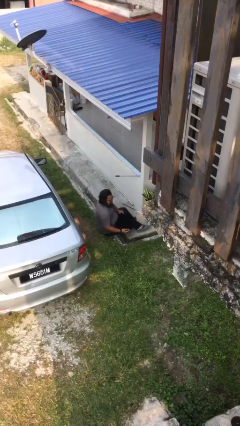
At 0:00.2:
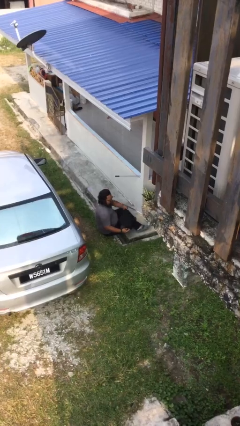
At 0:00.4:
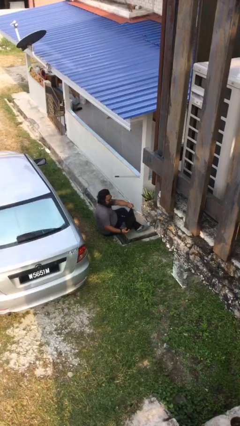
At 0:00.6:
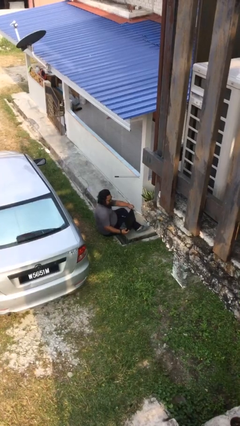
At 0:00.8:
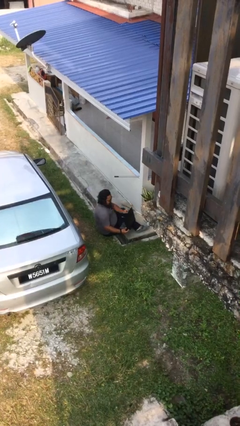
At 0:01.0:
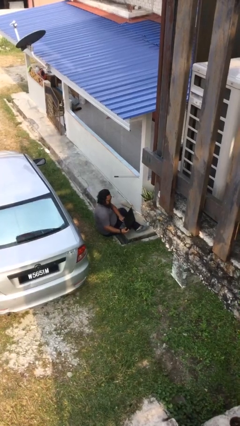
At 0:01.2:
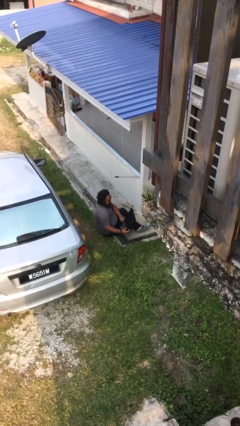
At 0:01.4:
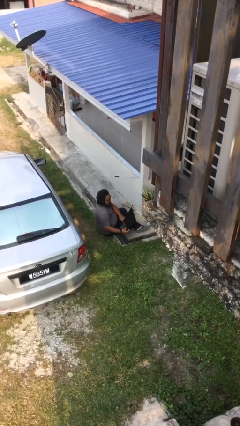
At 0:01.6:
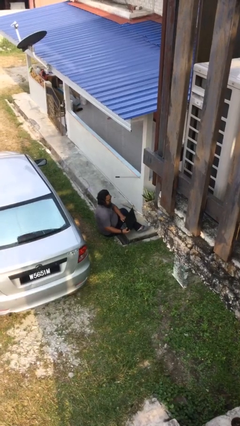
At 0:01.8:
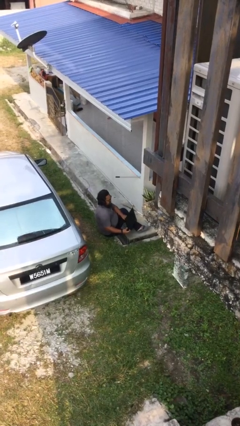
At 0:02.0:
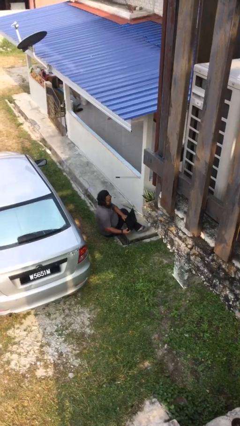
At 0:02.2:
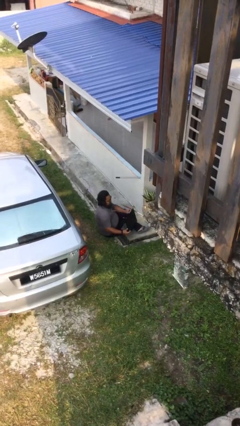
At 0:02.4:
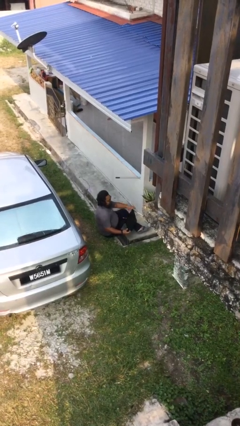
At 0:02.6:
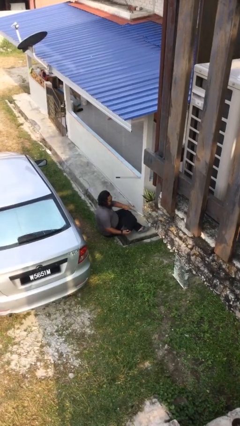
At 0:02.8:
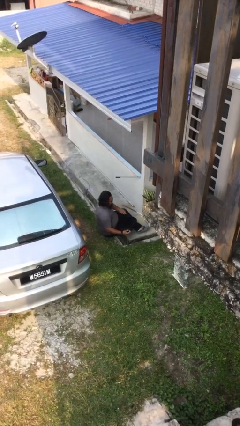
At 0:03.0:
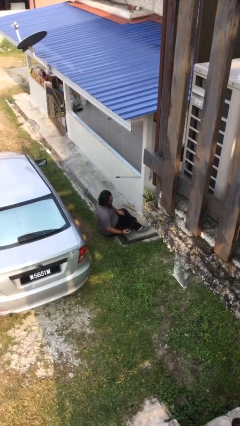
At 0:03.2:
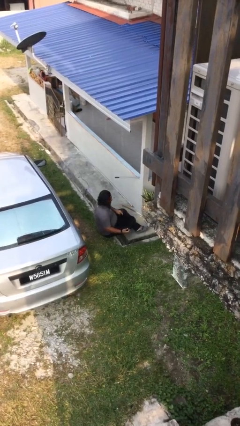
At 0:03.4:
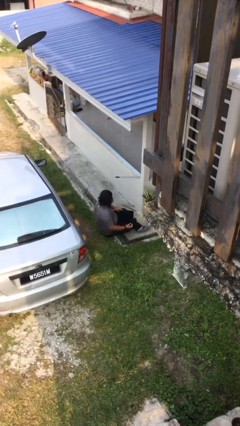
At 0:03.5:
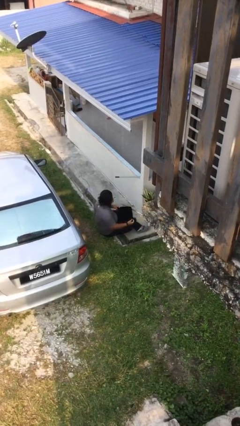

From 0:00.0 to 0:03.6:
person interacts with laptop

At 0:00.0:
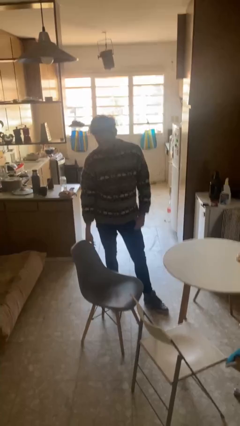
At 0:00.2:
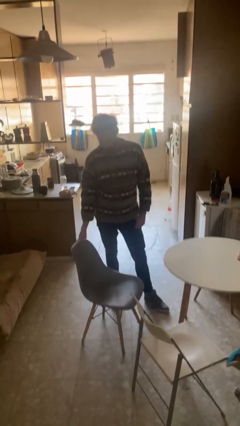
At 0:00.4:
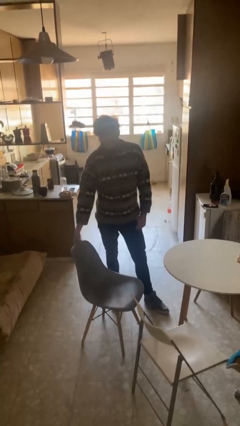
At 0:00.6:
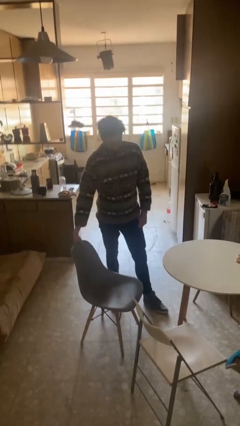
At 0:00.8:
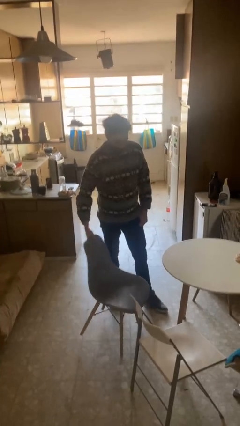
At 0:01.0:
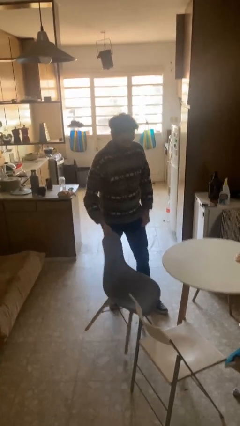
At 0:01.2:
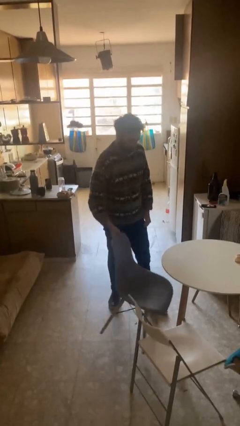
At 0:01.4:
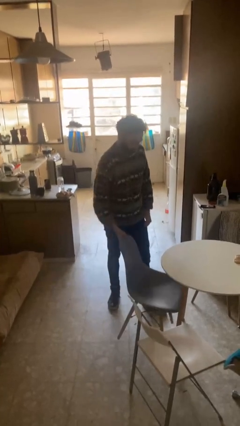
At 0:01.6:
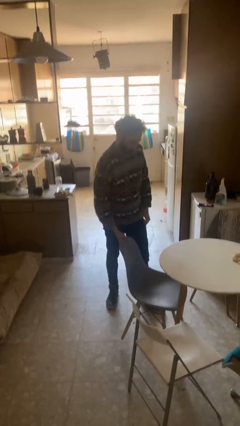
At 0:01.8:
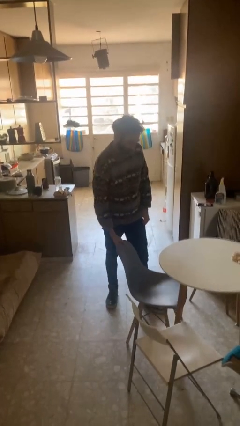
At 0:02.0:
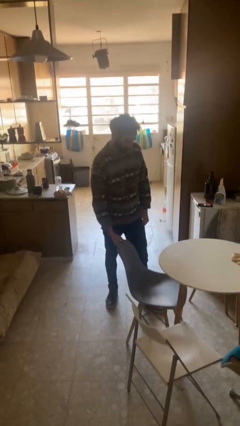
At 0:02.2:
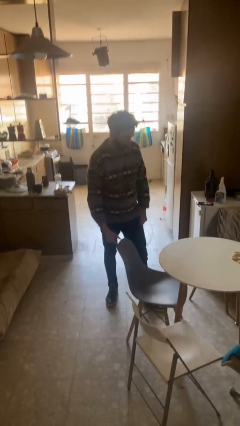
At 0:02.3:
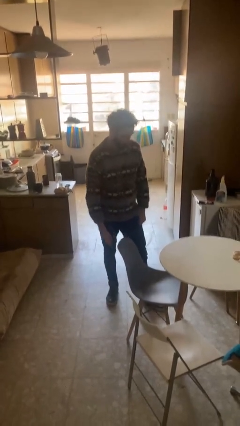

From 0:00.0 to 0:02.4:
person pushes in chair

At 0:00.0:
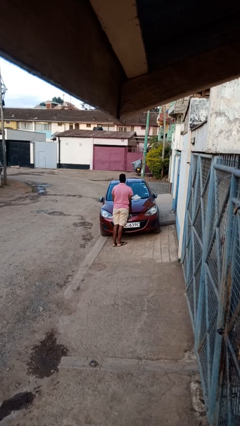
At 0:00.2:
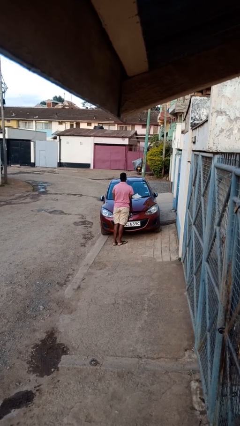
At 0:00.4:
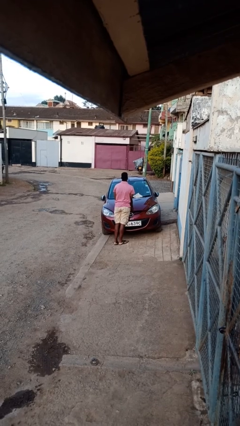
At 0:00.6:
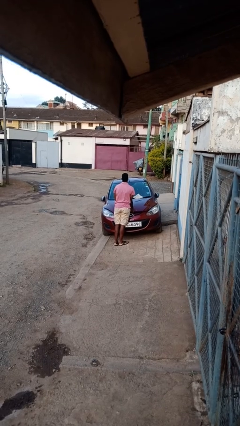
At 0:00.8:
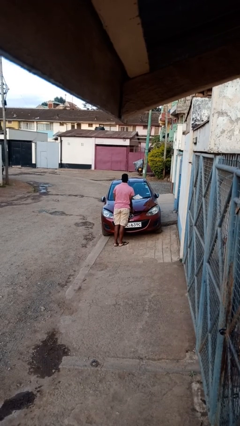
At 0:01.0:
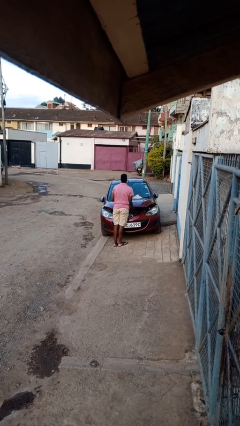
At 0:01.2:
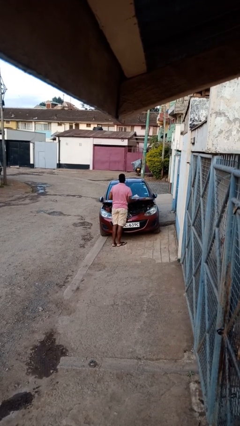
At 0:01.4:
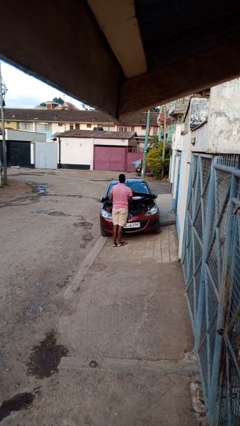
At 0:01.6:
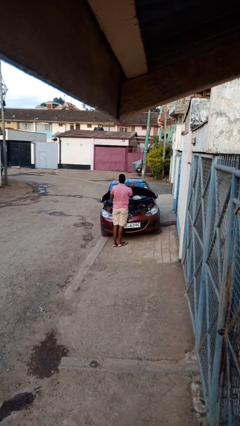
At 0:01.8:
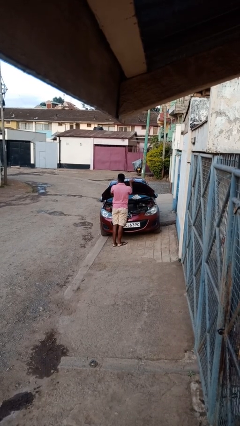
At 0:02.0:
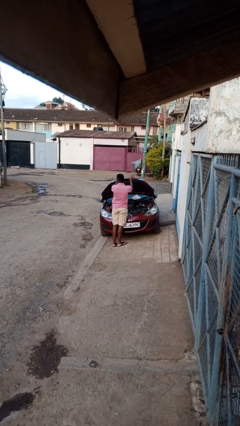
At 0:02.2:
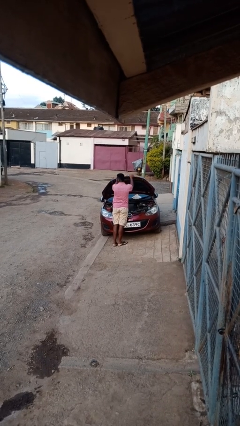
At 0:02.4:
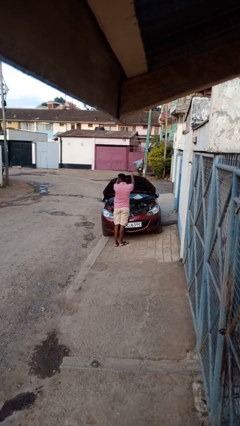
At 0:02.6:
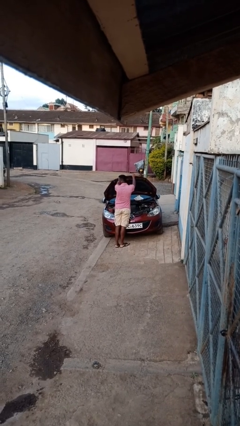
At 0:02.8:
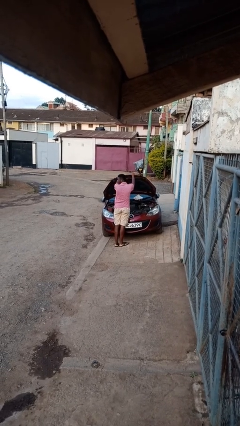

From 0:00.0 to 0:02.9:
person opens car hood

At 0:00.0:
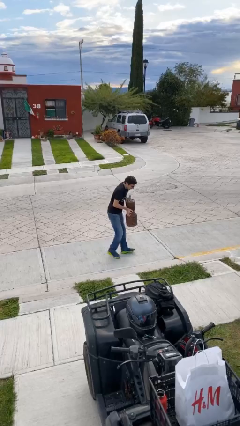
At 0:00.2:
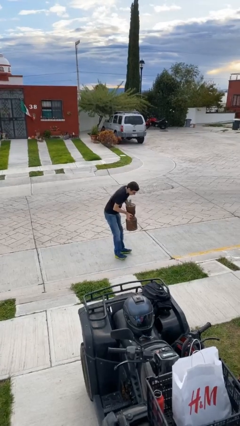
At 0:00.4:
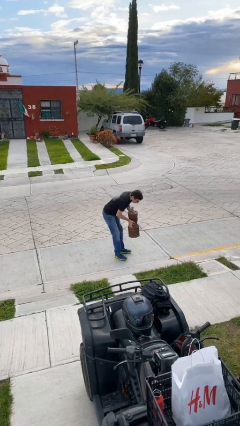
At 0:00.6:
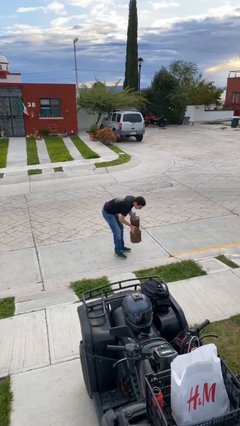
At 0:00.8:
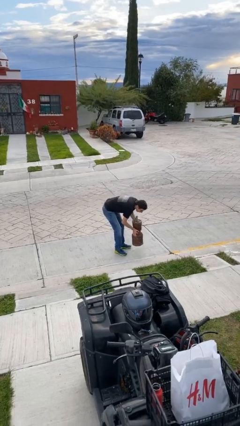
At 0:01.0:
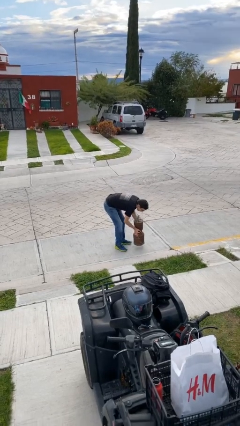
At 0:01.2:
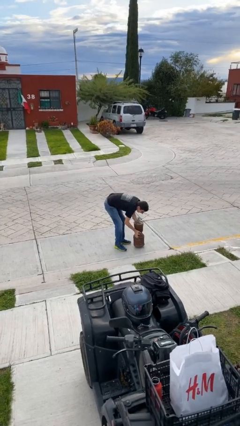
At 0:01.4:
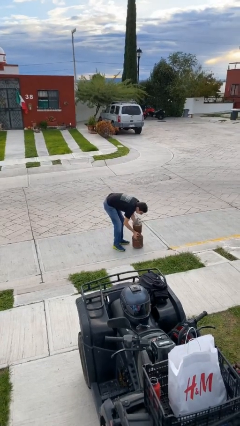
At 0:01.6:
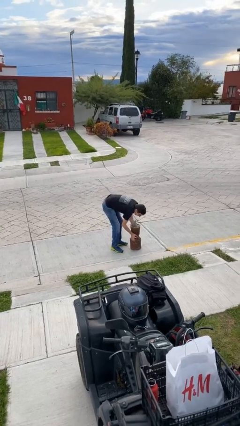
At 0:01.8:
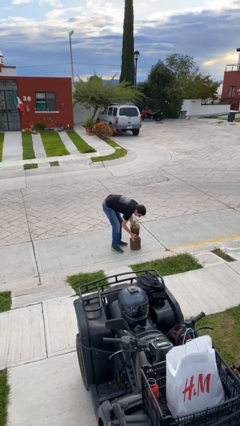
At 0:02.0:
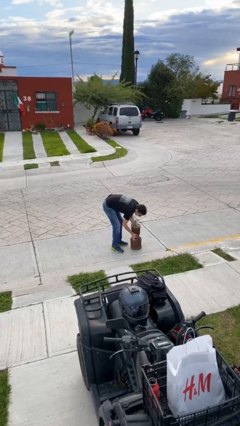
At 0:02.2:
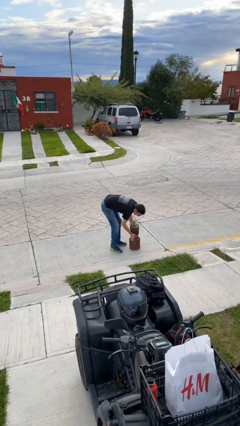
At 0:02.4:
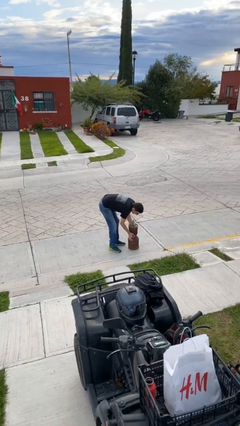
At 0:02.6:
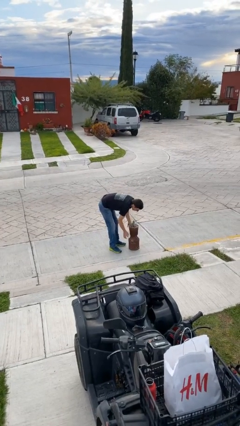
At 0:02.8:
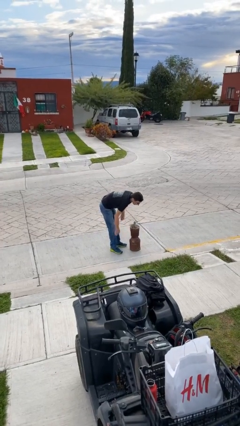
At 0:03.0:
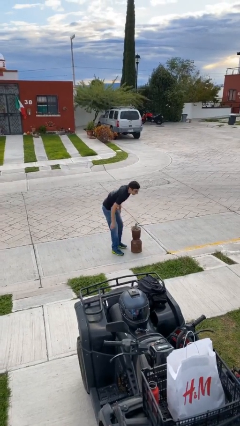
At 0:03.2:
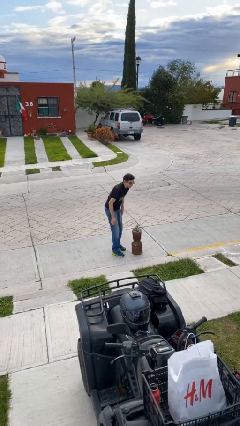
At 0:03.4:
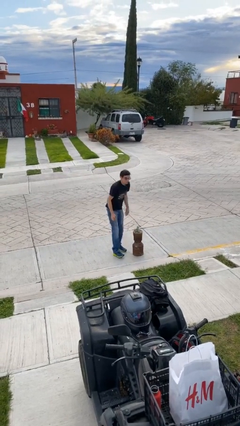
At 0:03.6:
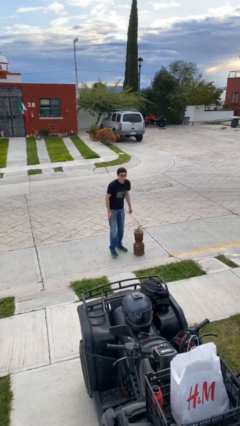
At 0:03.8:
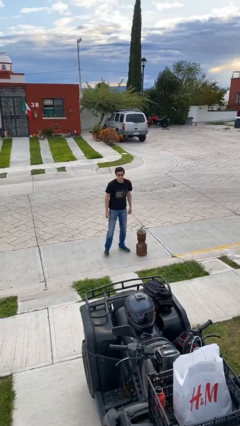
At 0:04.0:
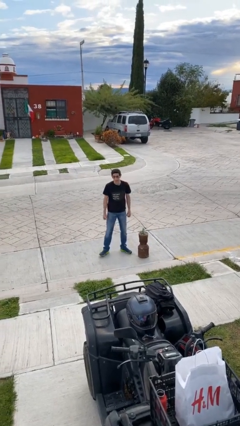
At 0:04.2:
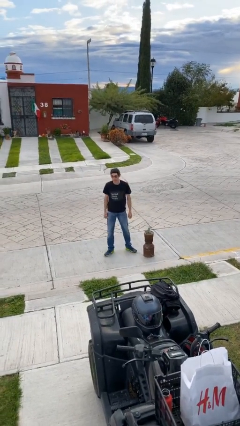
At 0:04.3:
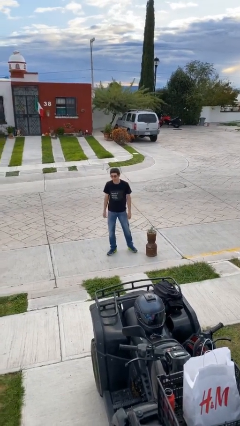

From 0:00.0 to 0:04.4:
person puts down object on floor

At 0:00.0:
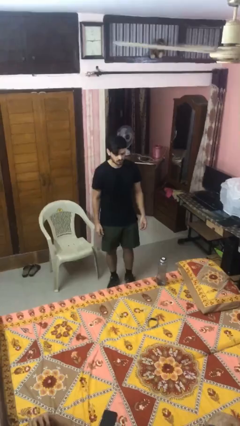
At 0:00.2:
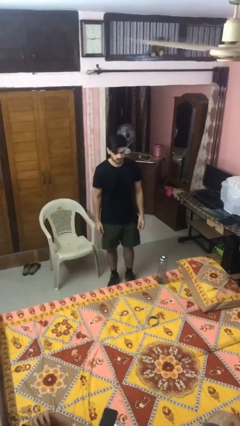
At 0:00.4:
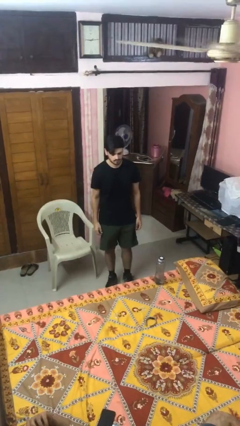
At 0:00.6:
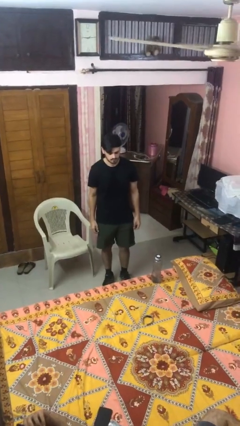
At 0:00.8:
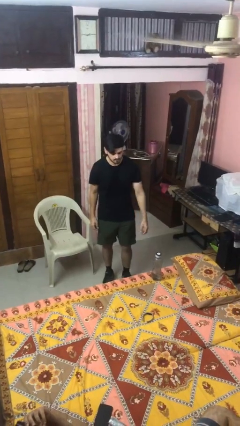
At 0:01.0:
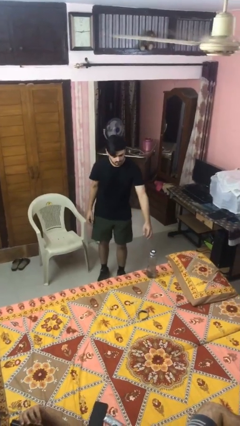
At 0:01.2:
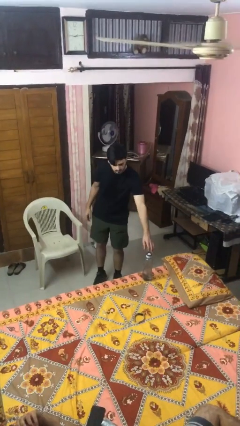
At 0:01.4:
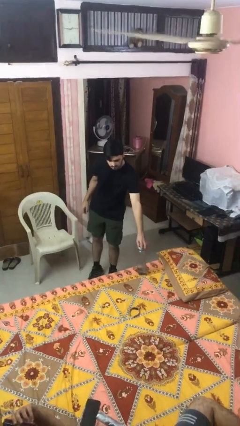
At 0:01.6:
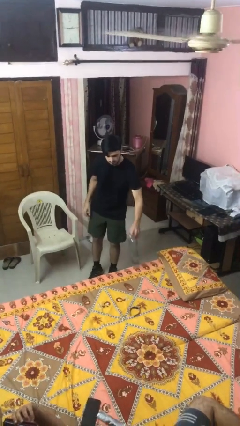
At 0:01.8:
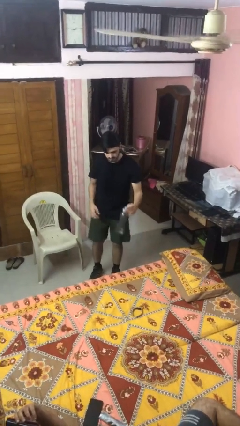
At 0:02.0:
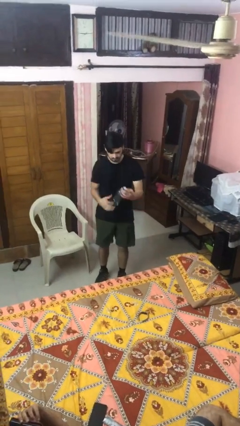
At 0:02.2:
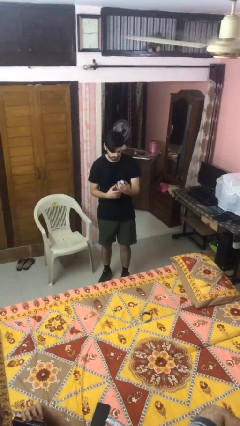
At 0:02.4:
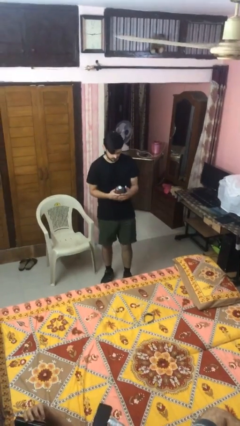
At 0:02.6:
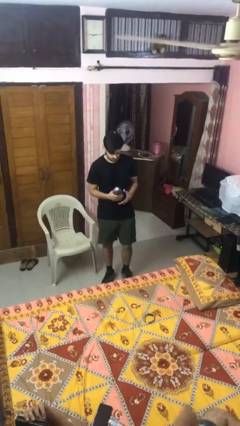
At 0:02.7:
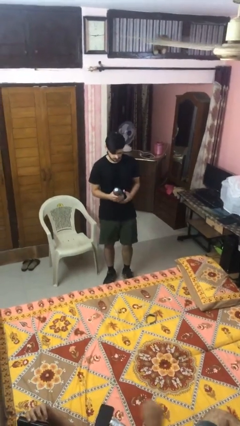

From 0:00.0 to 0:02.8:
person picks up object from bed

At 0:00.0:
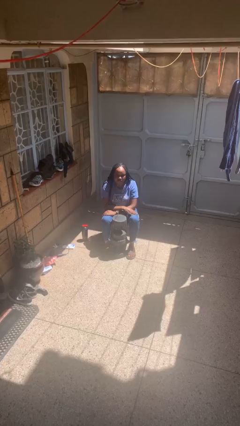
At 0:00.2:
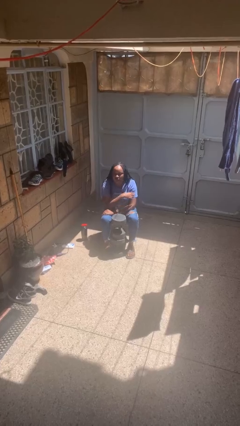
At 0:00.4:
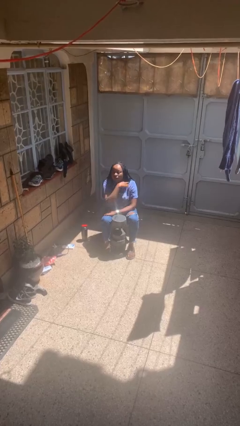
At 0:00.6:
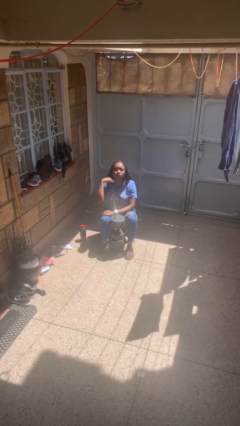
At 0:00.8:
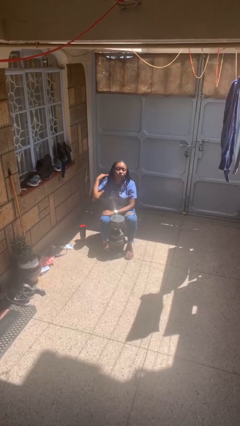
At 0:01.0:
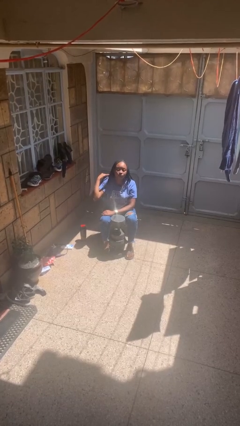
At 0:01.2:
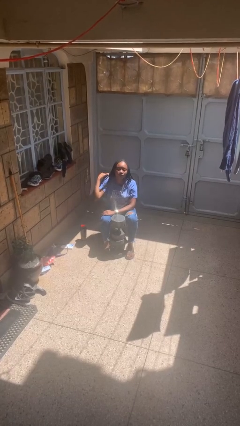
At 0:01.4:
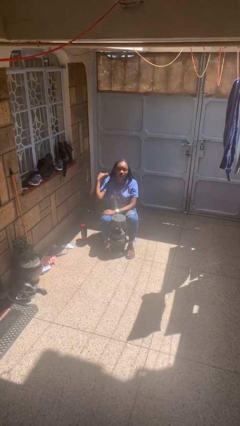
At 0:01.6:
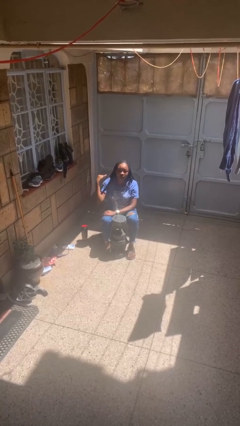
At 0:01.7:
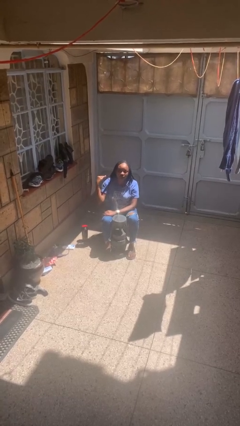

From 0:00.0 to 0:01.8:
person gestures cut
